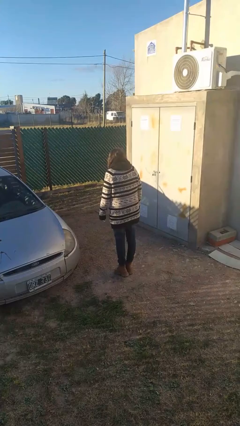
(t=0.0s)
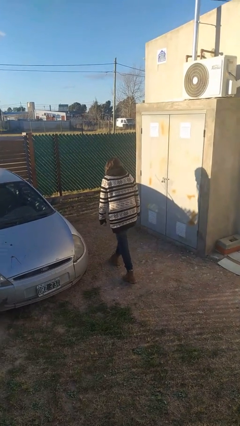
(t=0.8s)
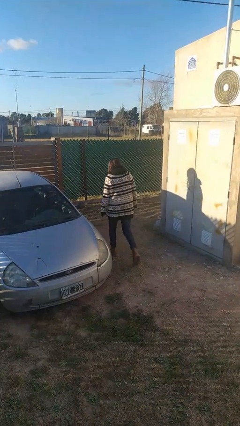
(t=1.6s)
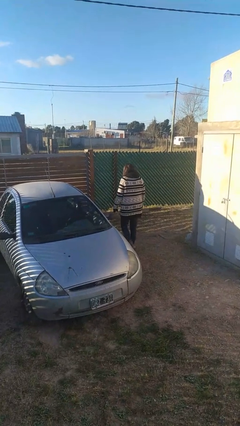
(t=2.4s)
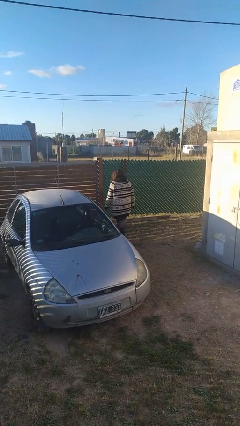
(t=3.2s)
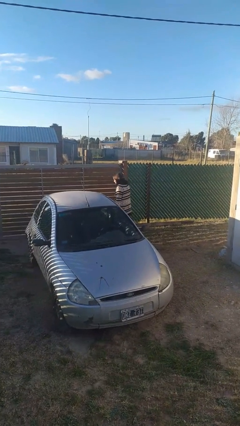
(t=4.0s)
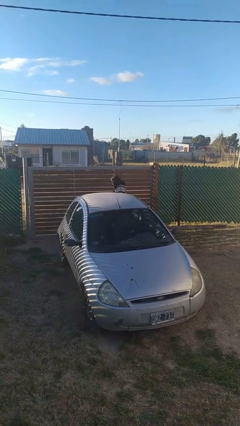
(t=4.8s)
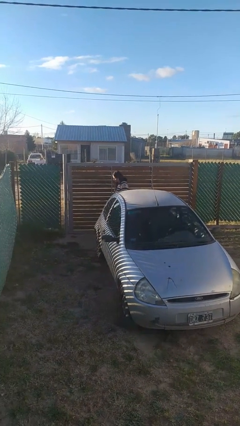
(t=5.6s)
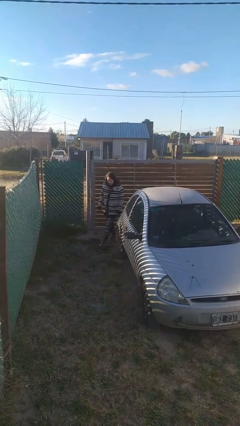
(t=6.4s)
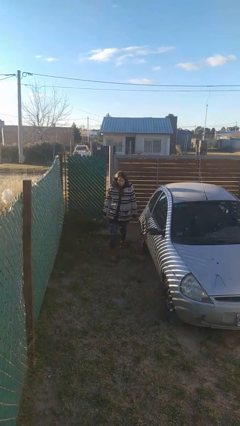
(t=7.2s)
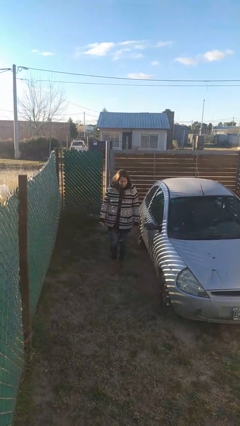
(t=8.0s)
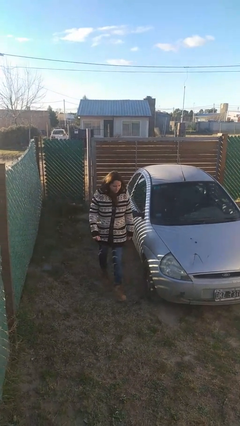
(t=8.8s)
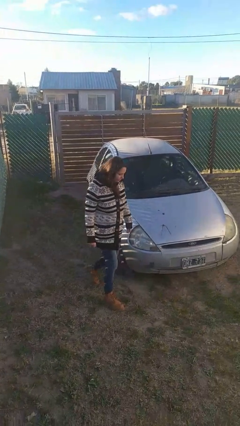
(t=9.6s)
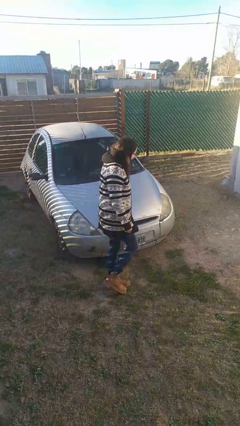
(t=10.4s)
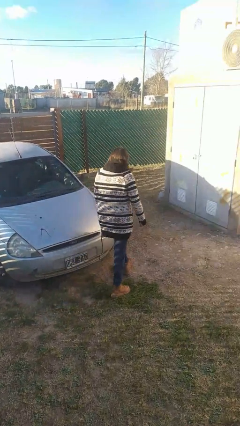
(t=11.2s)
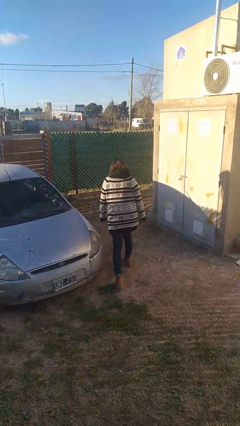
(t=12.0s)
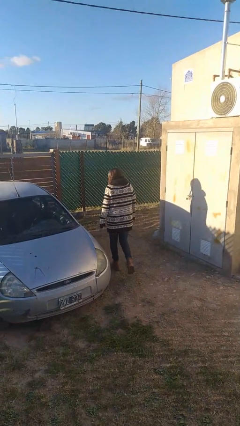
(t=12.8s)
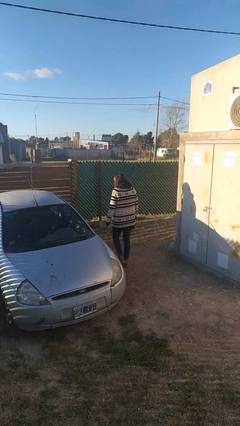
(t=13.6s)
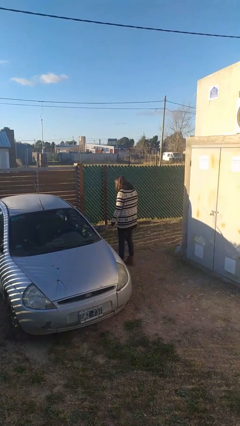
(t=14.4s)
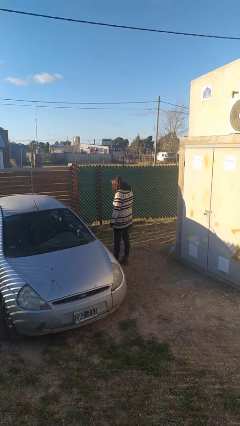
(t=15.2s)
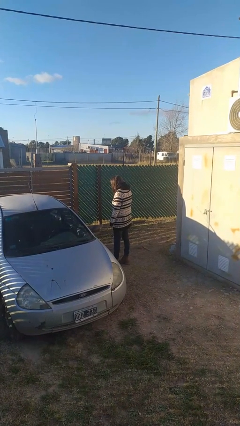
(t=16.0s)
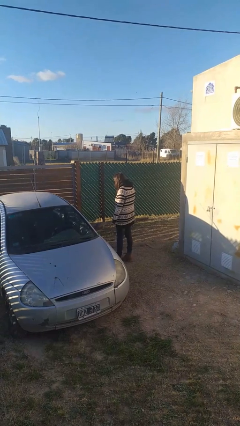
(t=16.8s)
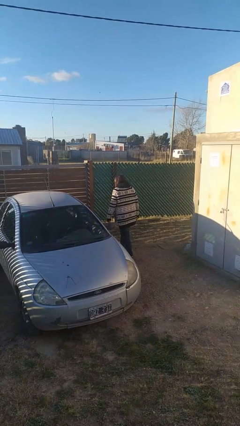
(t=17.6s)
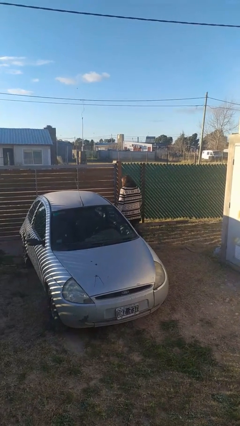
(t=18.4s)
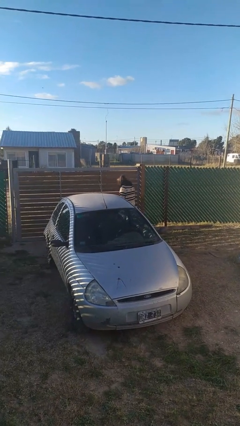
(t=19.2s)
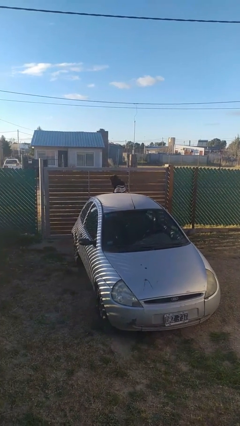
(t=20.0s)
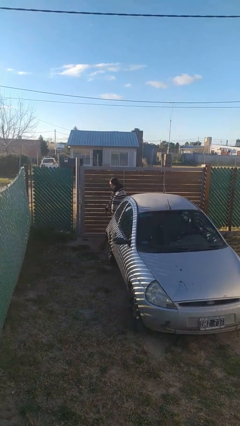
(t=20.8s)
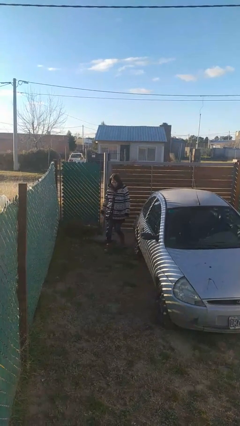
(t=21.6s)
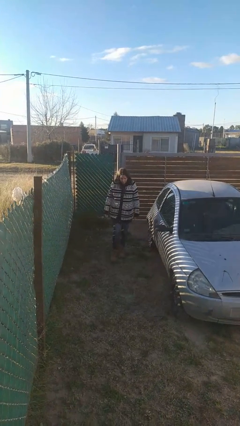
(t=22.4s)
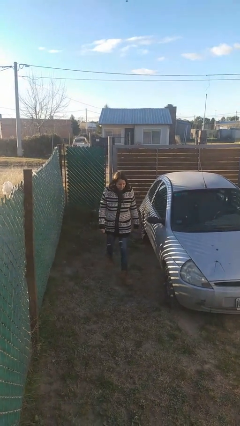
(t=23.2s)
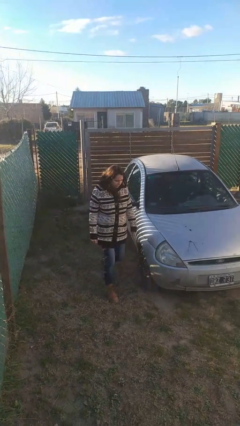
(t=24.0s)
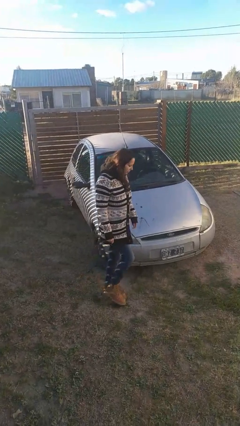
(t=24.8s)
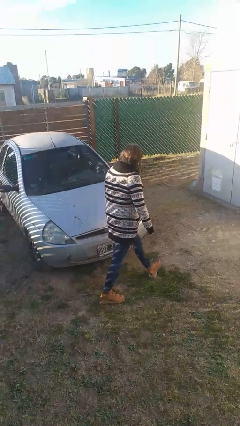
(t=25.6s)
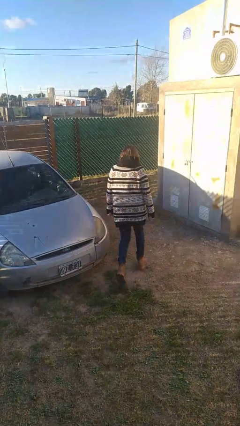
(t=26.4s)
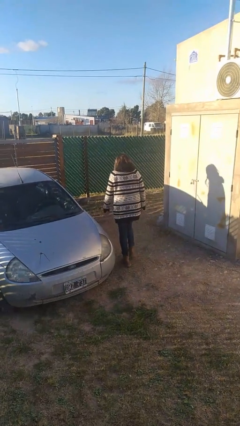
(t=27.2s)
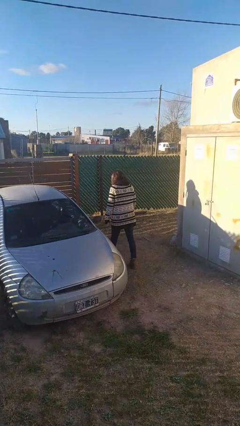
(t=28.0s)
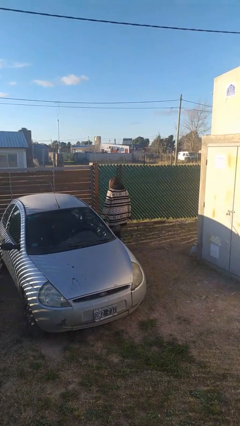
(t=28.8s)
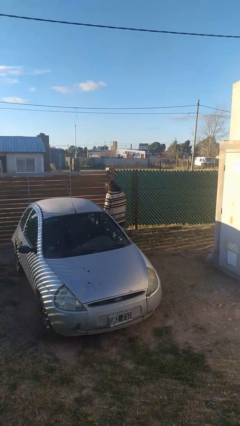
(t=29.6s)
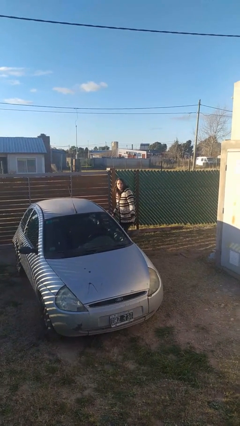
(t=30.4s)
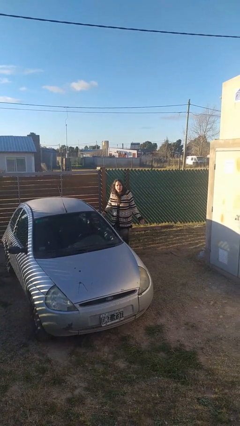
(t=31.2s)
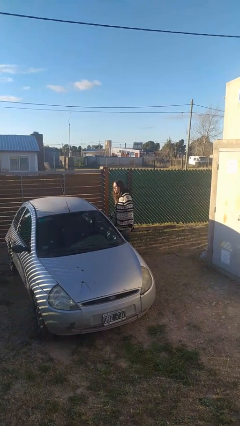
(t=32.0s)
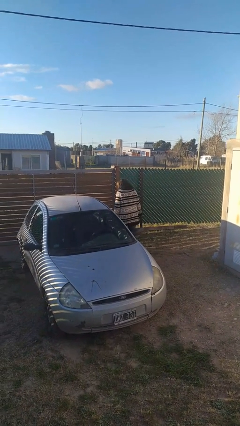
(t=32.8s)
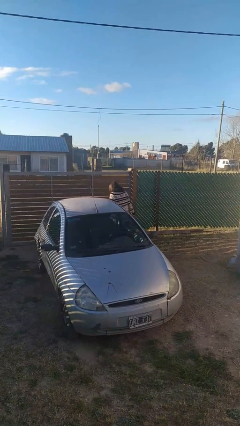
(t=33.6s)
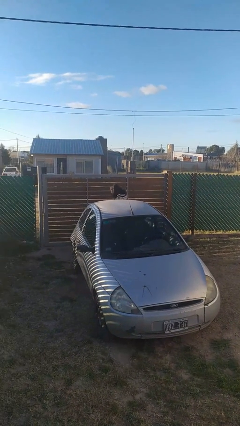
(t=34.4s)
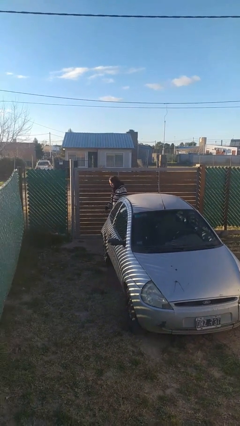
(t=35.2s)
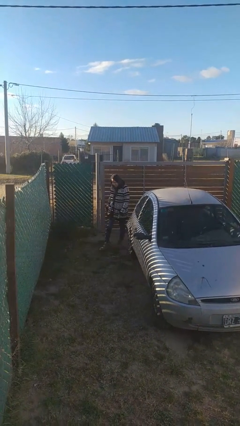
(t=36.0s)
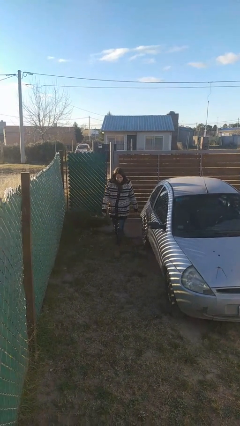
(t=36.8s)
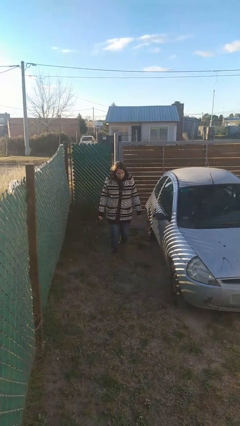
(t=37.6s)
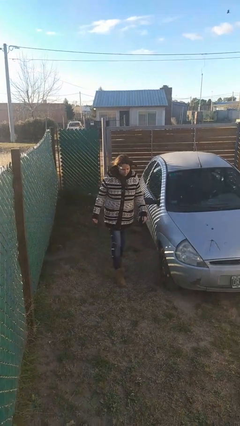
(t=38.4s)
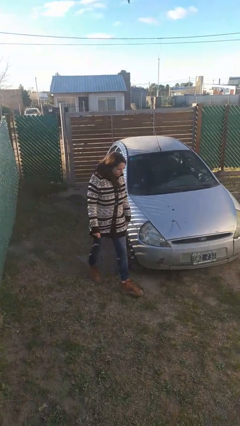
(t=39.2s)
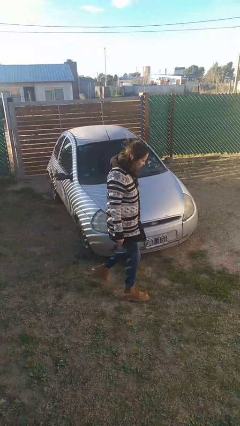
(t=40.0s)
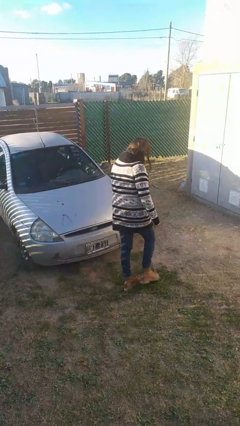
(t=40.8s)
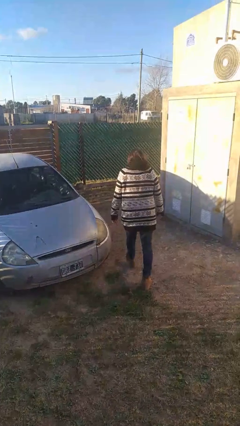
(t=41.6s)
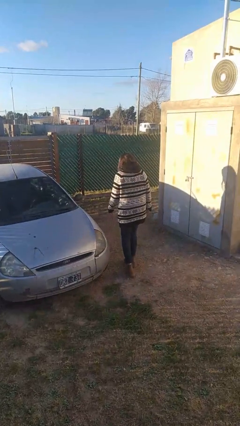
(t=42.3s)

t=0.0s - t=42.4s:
person walks around car

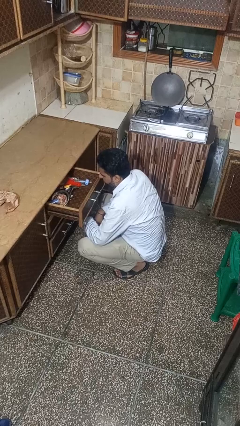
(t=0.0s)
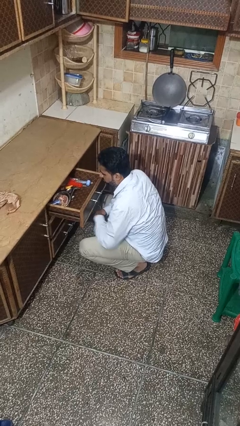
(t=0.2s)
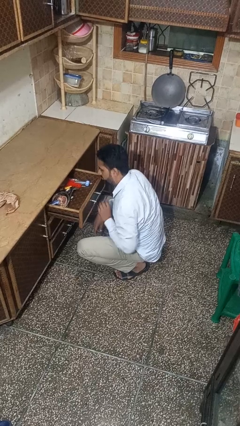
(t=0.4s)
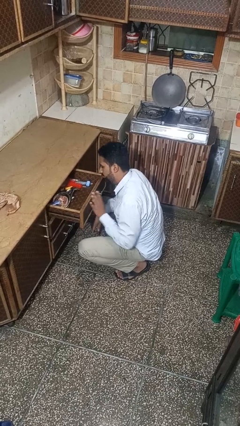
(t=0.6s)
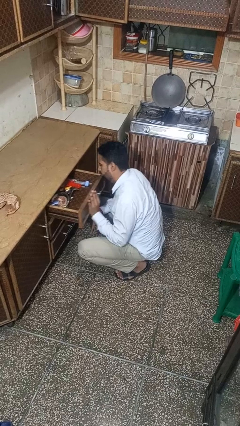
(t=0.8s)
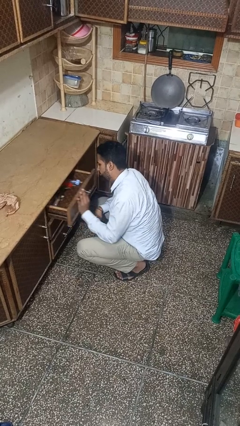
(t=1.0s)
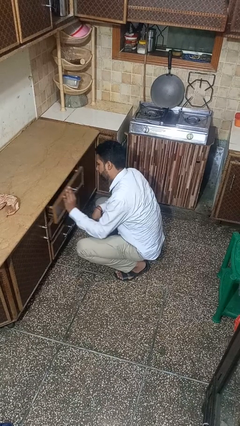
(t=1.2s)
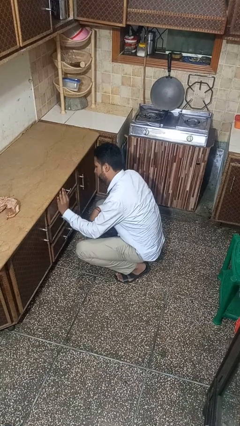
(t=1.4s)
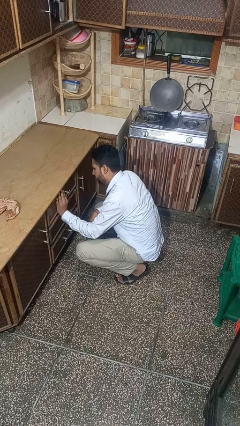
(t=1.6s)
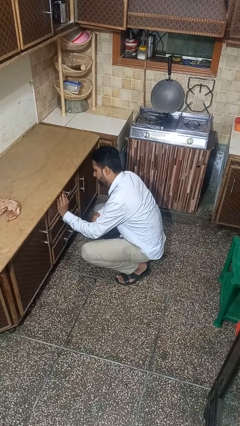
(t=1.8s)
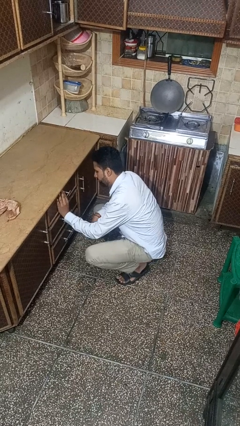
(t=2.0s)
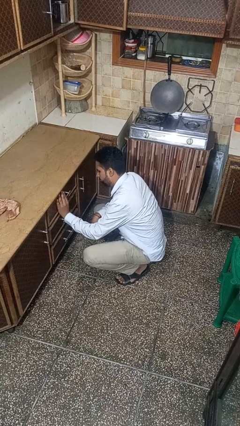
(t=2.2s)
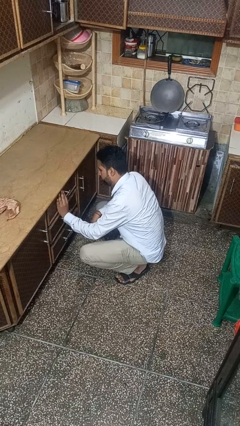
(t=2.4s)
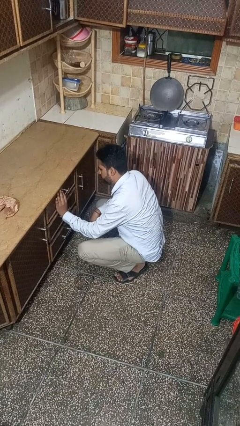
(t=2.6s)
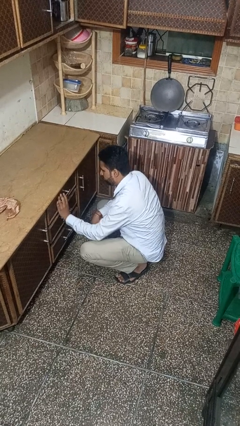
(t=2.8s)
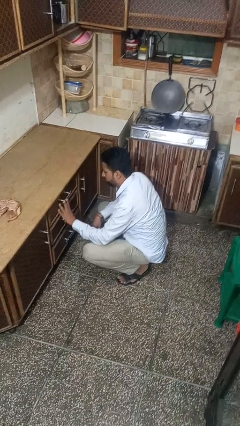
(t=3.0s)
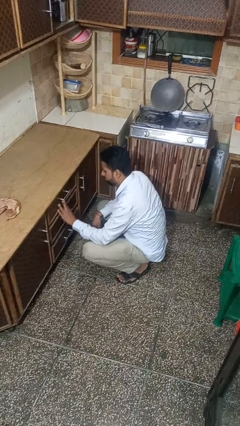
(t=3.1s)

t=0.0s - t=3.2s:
person closes kitchen drawer

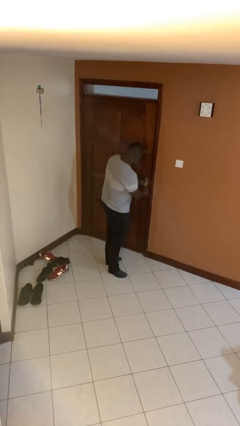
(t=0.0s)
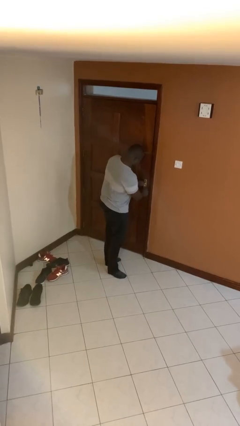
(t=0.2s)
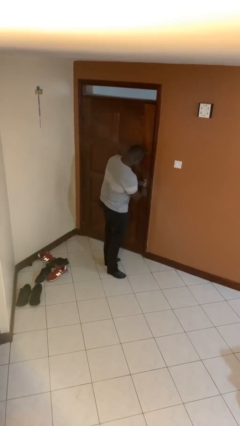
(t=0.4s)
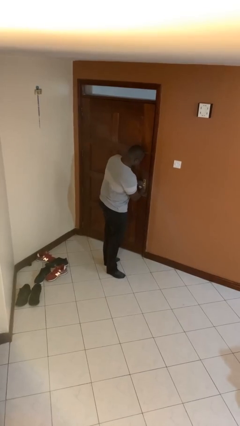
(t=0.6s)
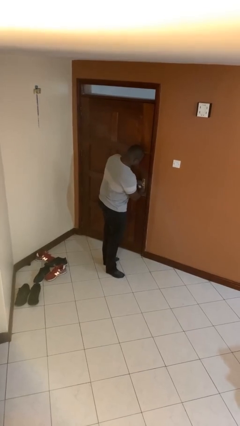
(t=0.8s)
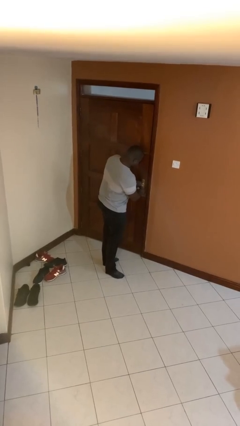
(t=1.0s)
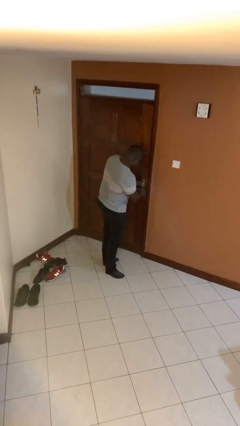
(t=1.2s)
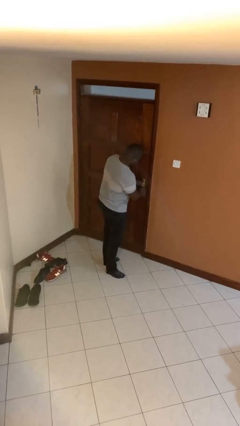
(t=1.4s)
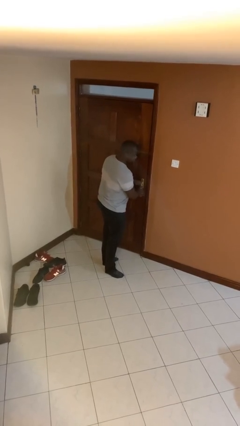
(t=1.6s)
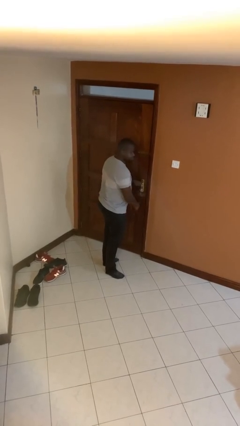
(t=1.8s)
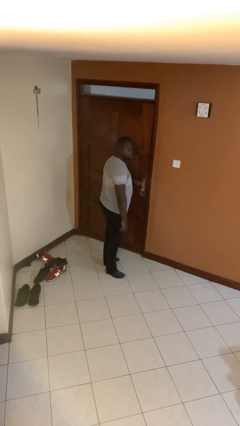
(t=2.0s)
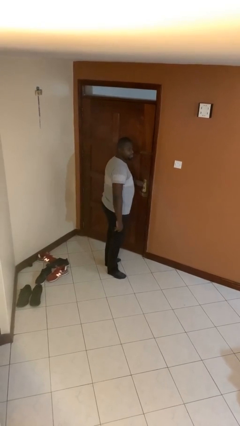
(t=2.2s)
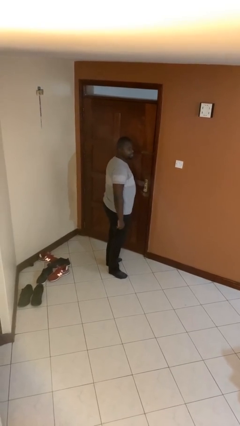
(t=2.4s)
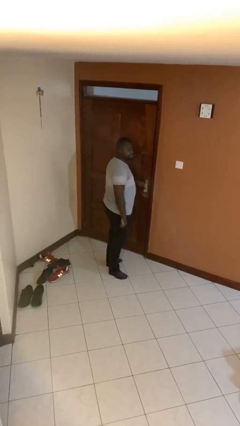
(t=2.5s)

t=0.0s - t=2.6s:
person locks door with keys

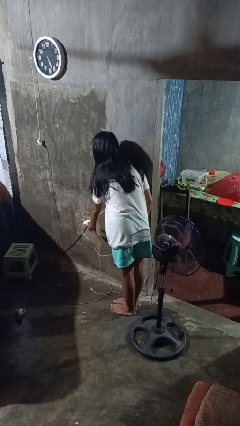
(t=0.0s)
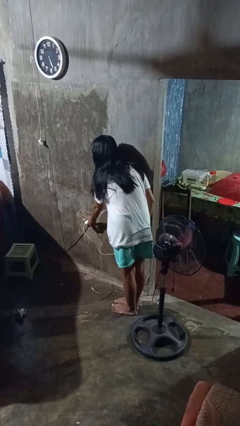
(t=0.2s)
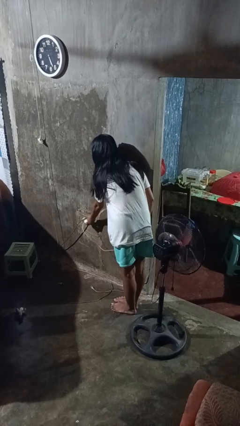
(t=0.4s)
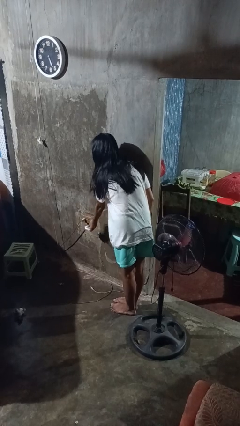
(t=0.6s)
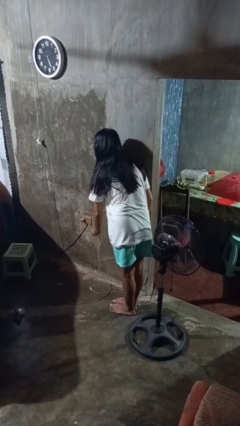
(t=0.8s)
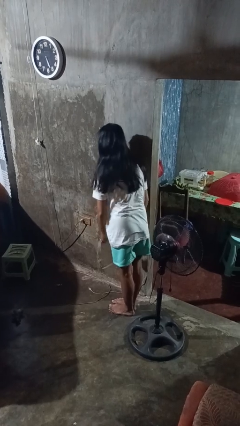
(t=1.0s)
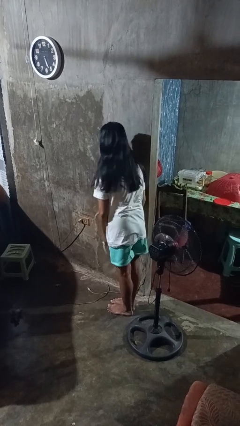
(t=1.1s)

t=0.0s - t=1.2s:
person unplugs from electrical socket
